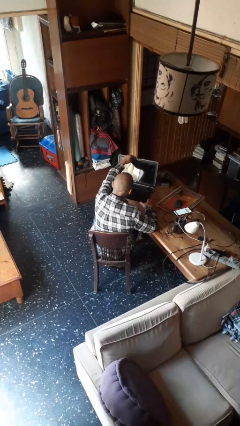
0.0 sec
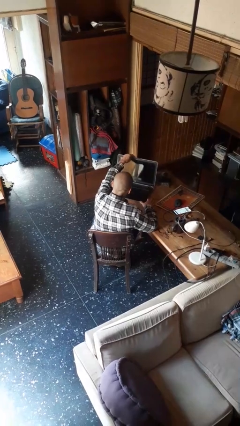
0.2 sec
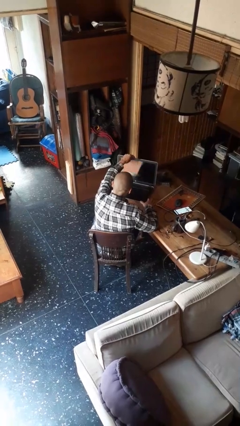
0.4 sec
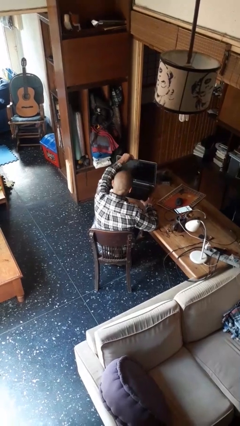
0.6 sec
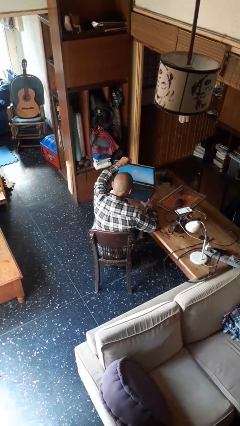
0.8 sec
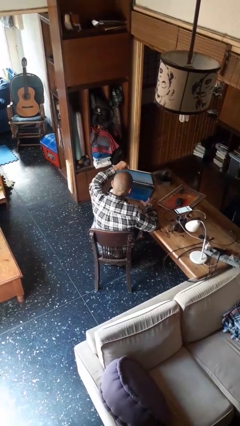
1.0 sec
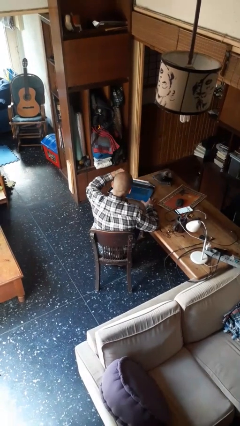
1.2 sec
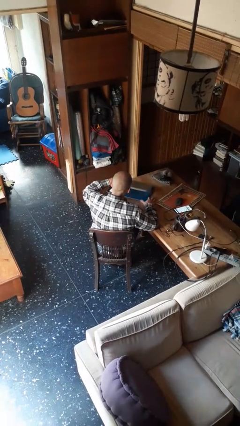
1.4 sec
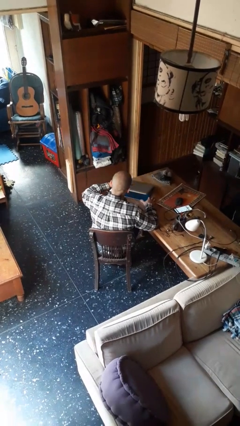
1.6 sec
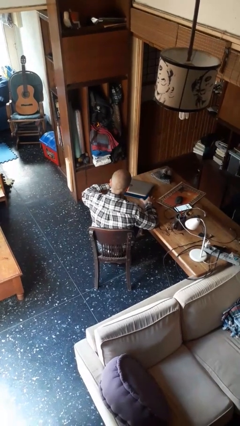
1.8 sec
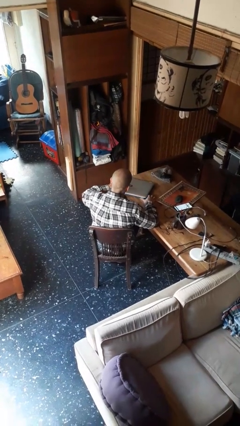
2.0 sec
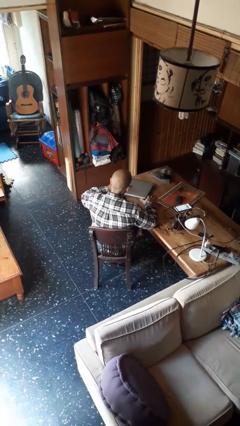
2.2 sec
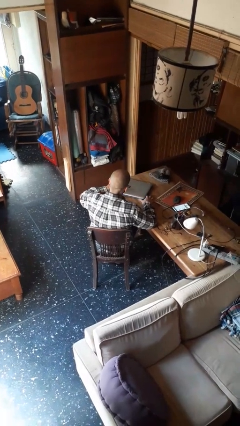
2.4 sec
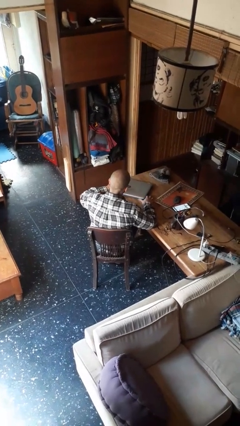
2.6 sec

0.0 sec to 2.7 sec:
person closes laptop

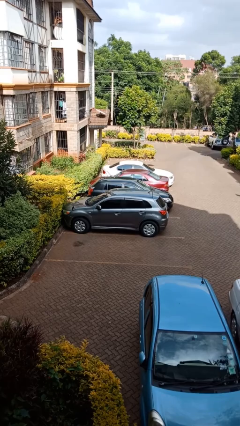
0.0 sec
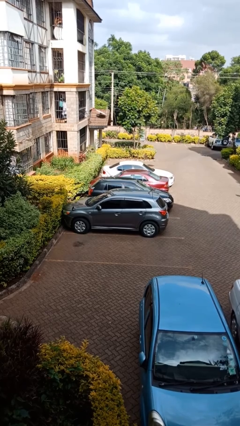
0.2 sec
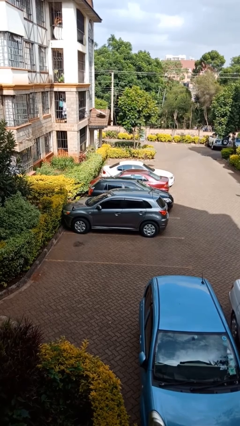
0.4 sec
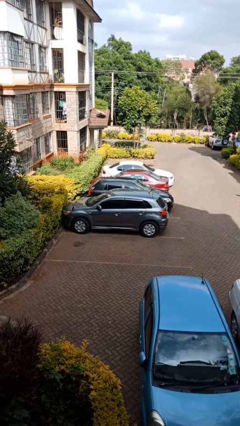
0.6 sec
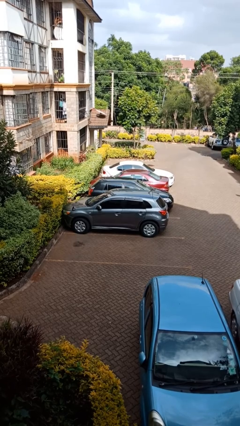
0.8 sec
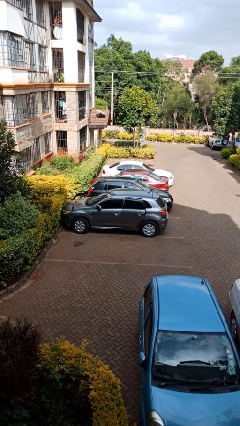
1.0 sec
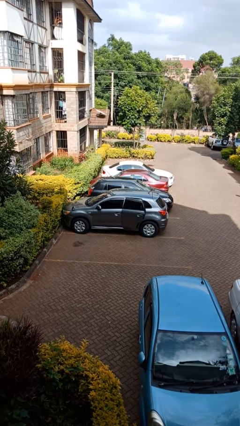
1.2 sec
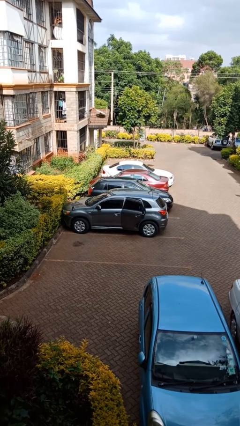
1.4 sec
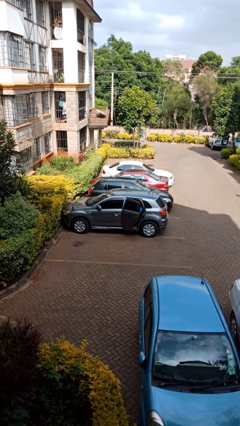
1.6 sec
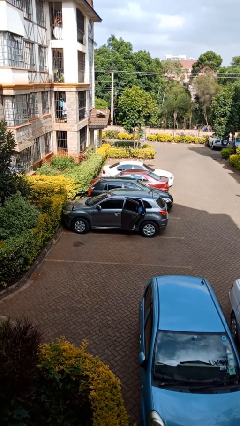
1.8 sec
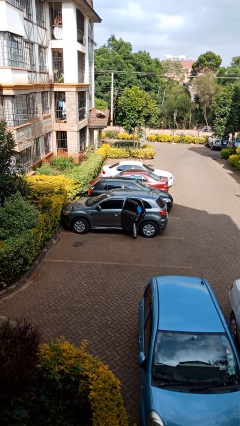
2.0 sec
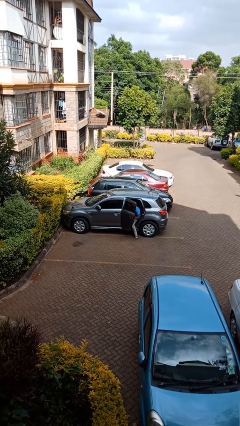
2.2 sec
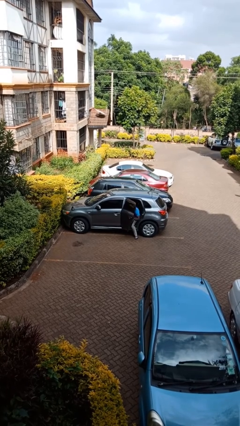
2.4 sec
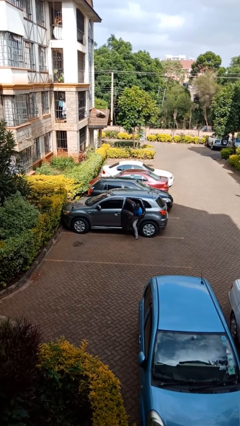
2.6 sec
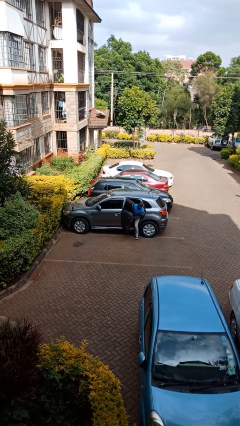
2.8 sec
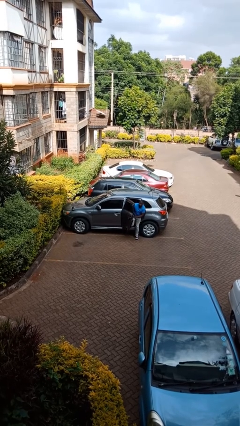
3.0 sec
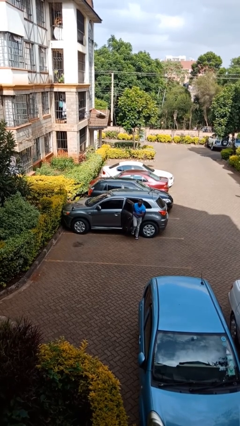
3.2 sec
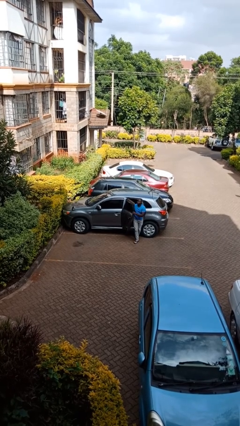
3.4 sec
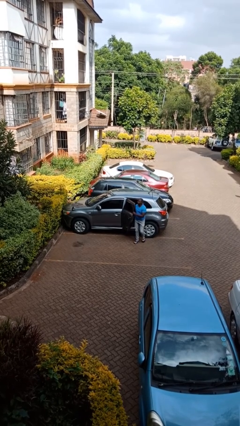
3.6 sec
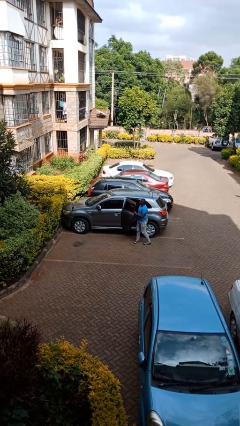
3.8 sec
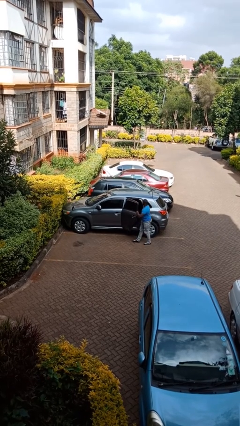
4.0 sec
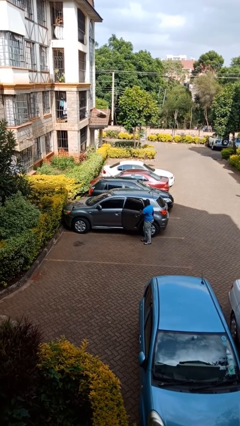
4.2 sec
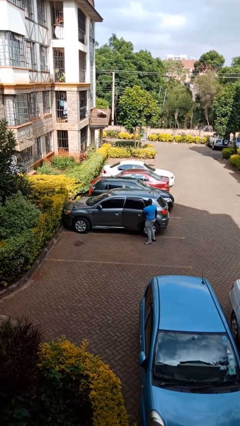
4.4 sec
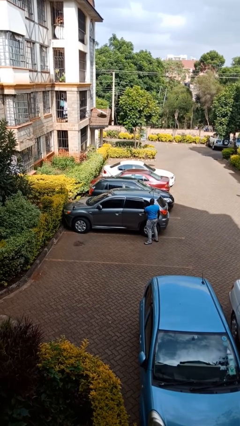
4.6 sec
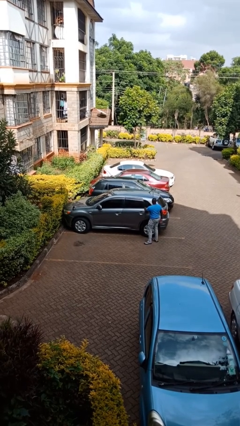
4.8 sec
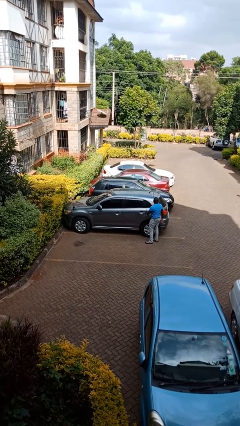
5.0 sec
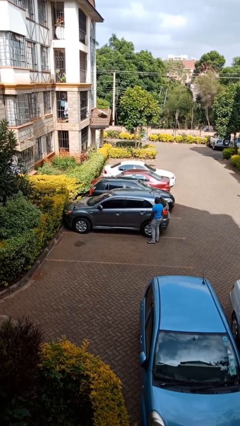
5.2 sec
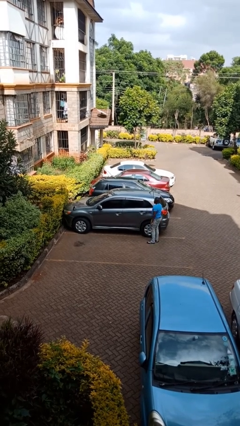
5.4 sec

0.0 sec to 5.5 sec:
car drops off person

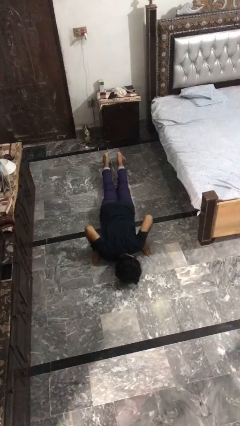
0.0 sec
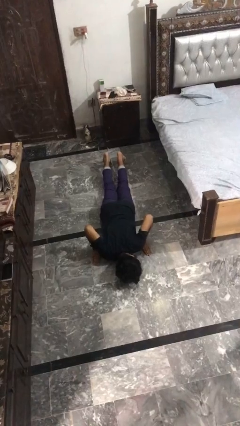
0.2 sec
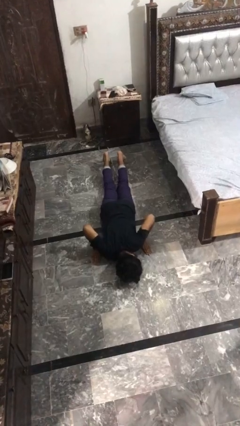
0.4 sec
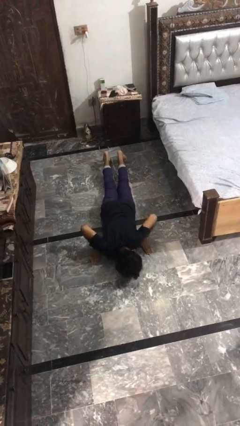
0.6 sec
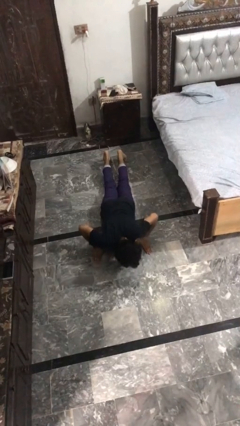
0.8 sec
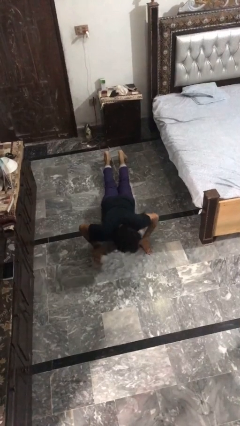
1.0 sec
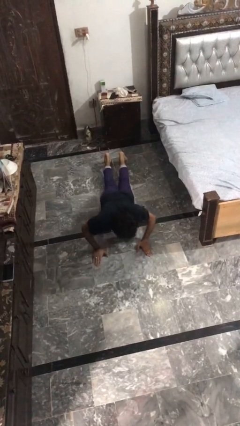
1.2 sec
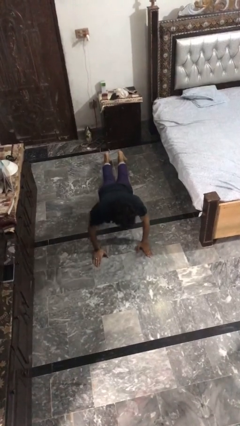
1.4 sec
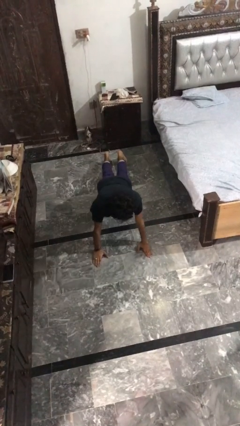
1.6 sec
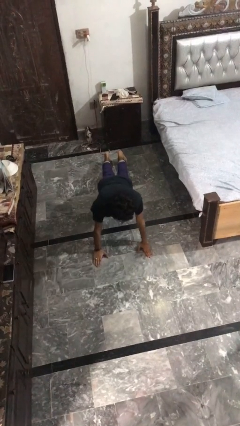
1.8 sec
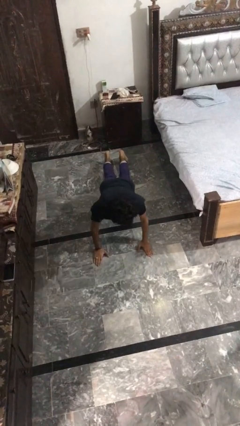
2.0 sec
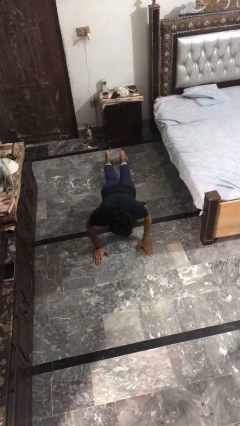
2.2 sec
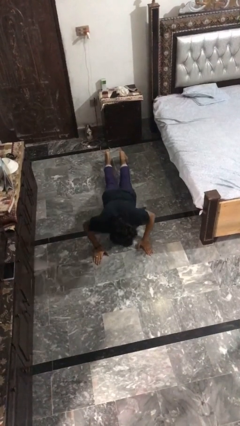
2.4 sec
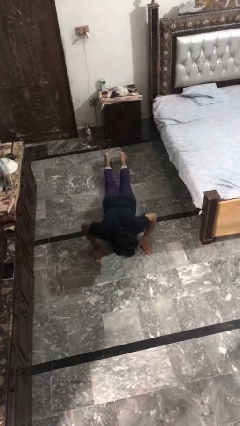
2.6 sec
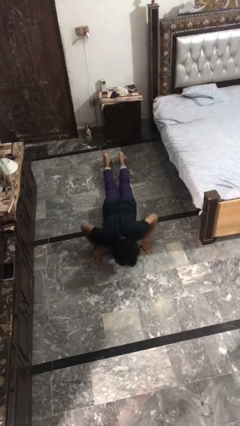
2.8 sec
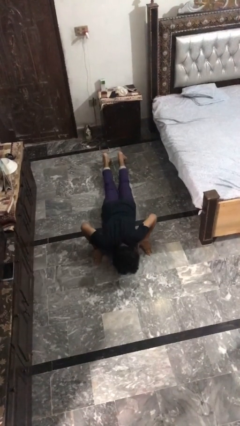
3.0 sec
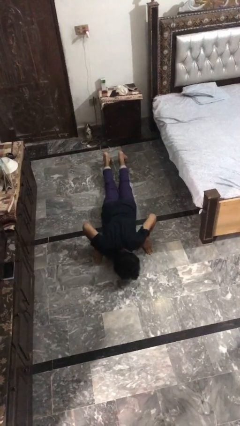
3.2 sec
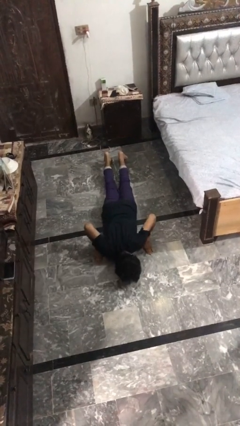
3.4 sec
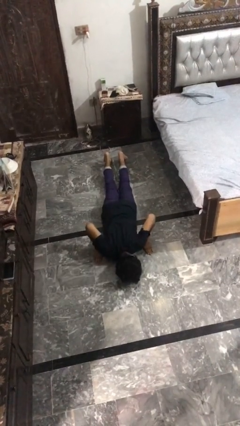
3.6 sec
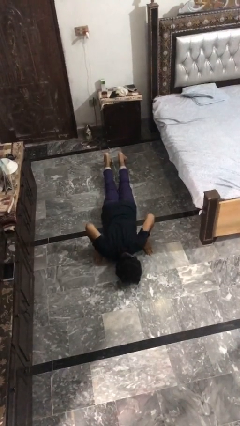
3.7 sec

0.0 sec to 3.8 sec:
person exercises with pushup

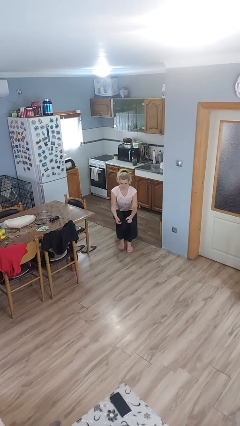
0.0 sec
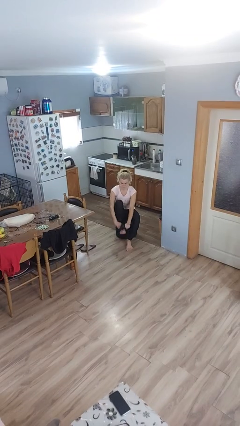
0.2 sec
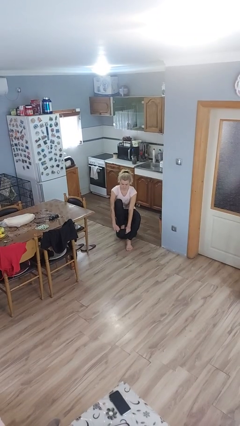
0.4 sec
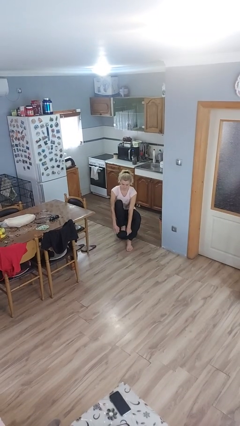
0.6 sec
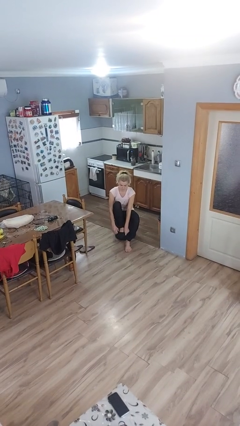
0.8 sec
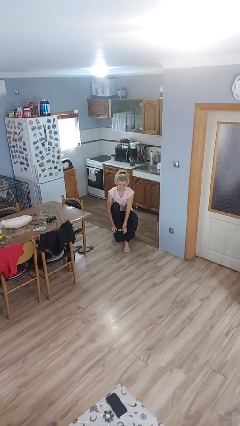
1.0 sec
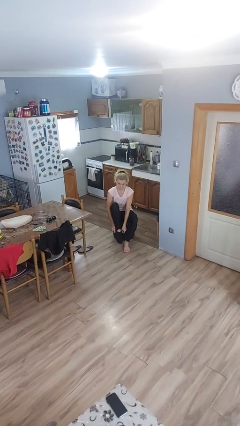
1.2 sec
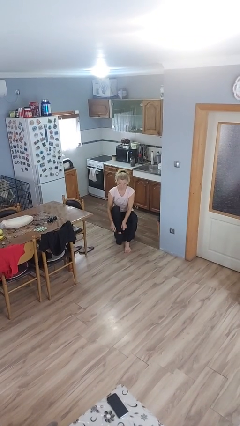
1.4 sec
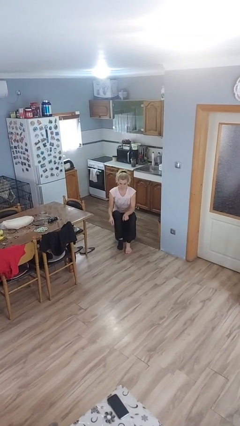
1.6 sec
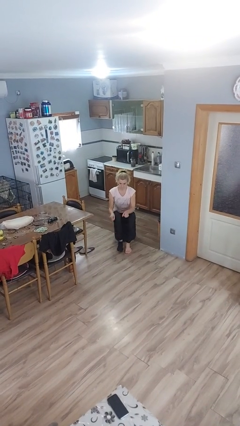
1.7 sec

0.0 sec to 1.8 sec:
person puts on socks

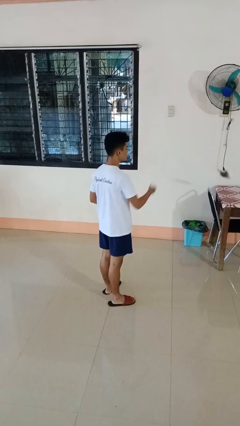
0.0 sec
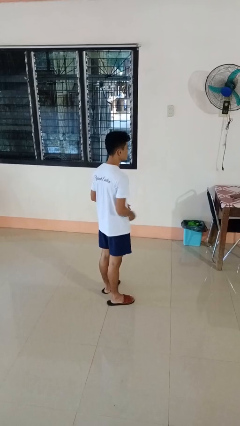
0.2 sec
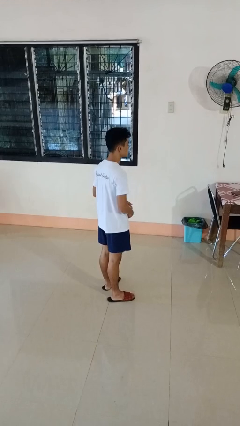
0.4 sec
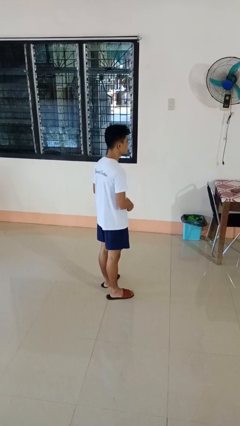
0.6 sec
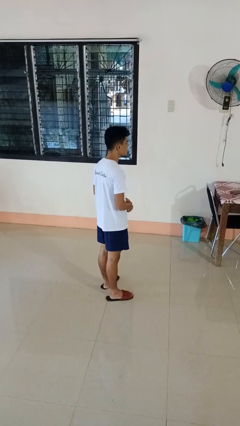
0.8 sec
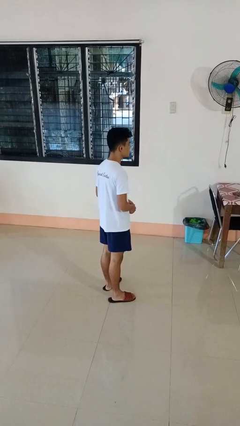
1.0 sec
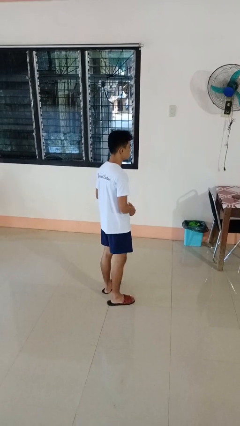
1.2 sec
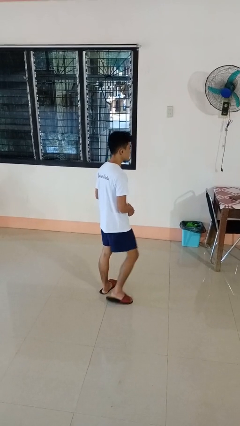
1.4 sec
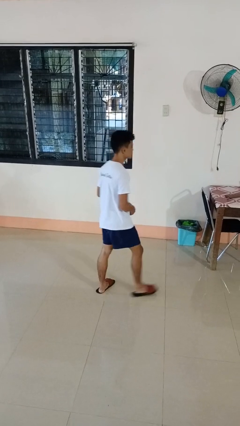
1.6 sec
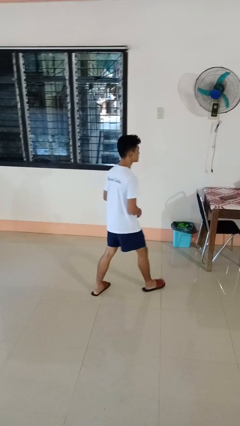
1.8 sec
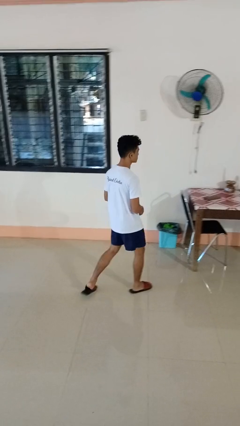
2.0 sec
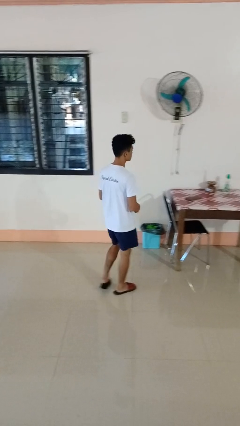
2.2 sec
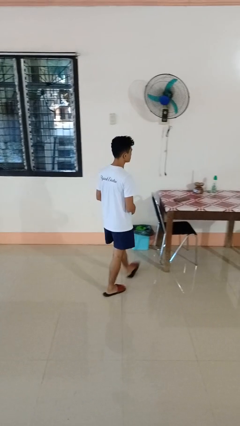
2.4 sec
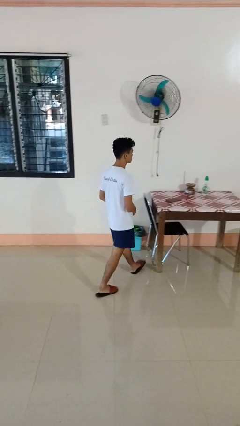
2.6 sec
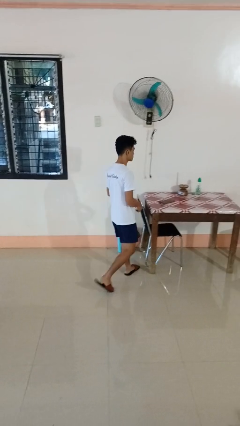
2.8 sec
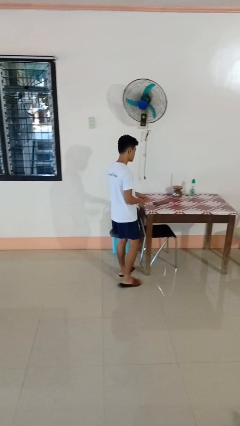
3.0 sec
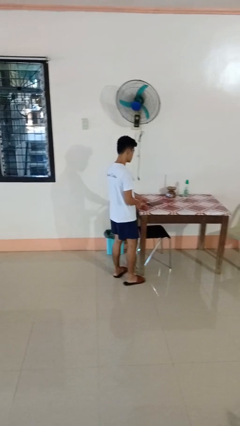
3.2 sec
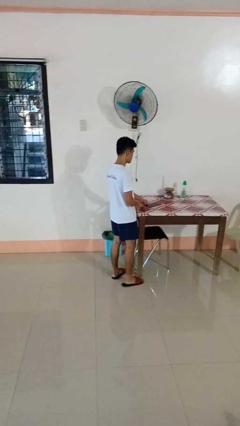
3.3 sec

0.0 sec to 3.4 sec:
person throws object on table

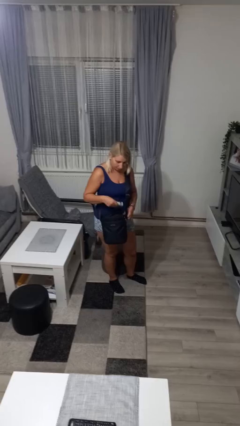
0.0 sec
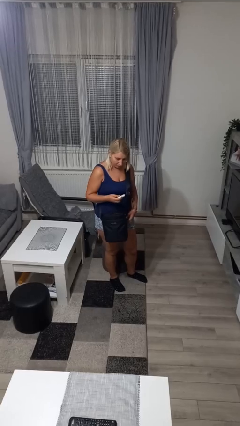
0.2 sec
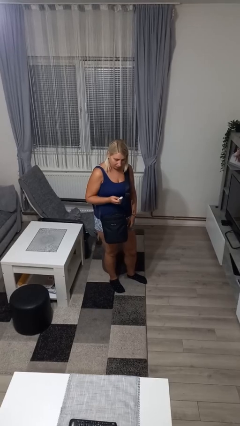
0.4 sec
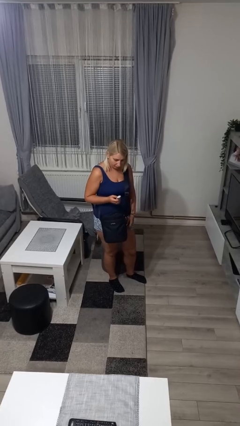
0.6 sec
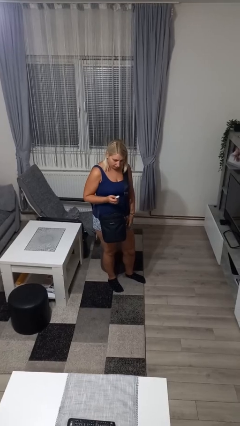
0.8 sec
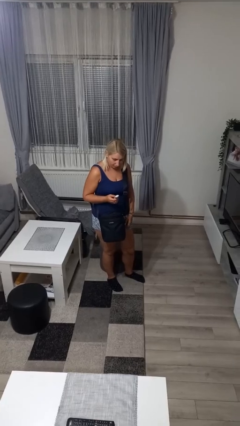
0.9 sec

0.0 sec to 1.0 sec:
person takes object from purse
